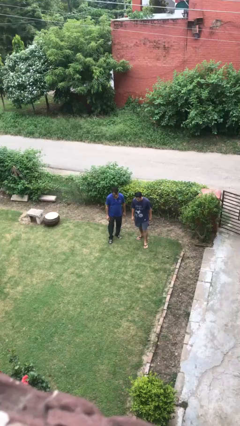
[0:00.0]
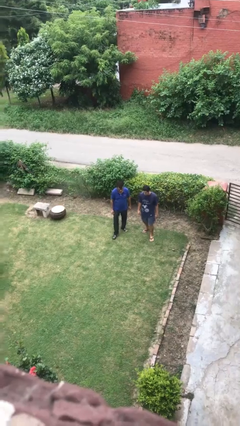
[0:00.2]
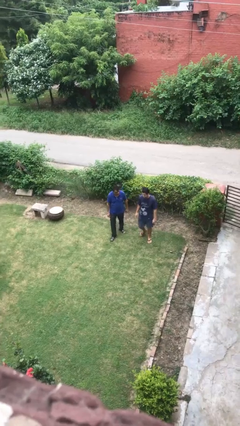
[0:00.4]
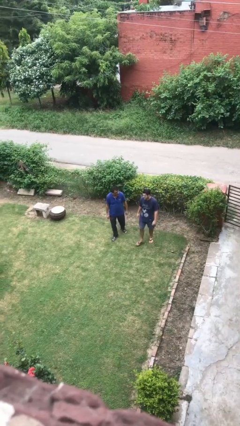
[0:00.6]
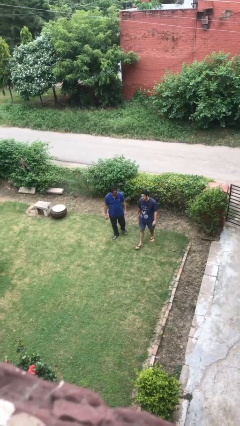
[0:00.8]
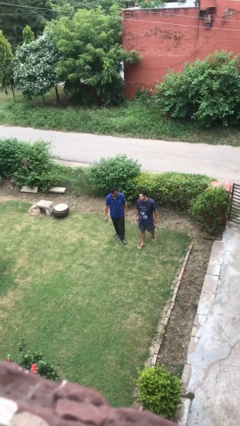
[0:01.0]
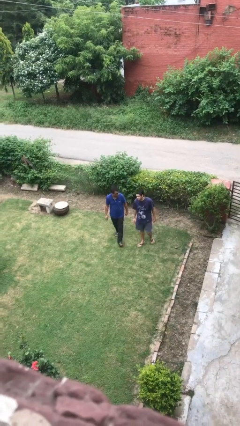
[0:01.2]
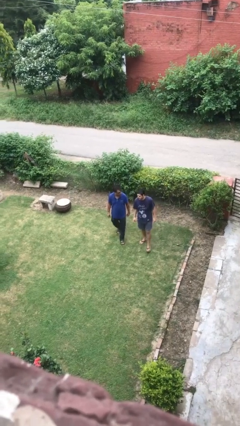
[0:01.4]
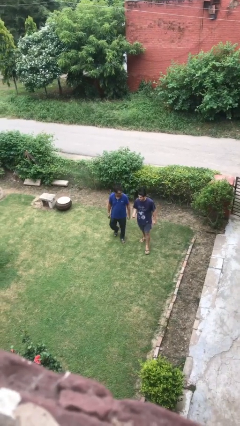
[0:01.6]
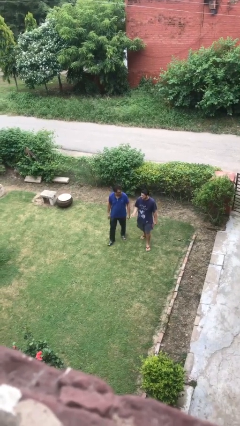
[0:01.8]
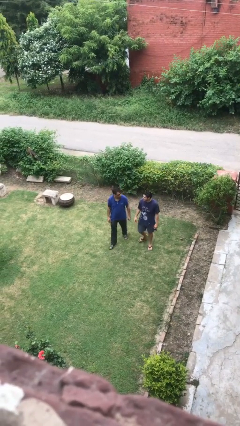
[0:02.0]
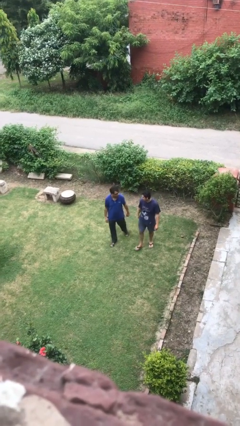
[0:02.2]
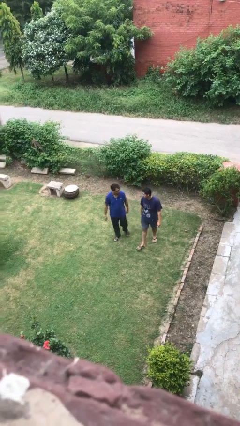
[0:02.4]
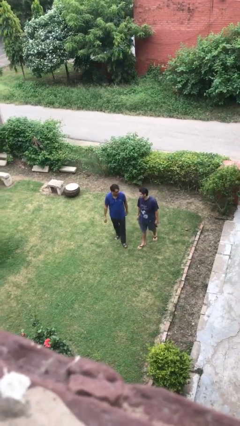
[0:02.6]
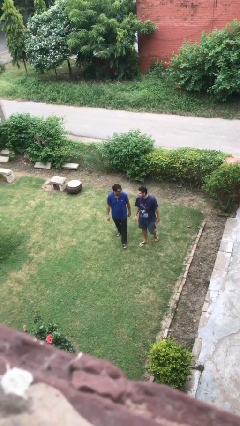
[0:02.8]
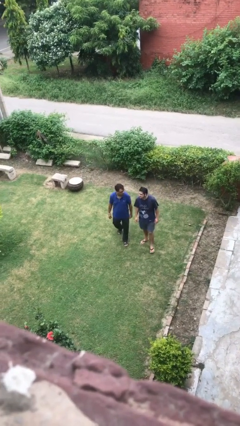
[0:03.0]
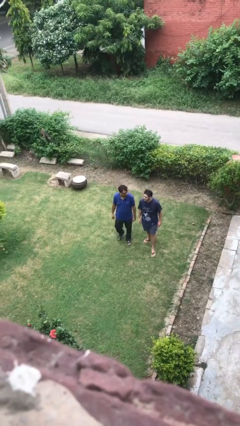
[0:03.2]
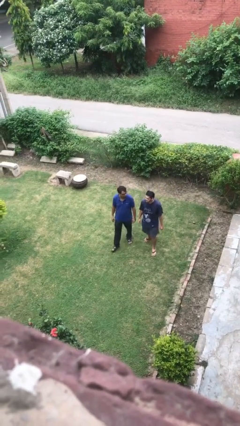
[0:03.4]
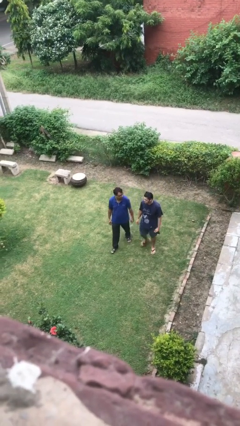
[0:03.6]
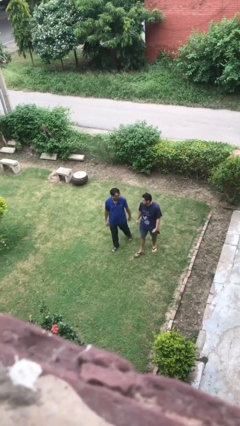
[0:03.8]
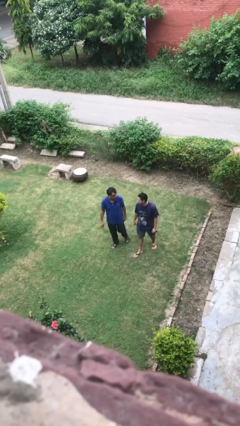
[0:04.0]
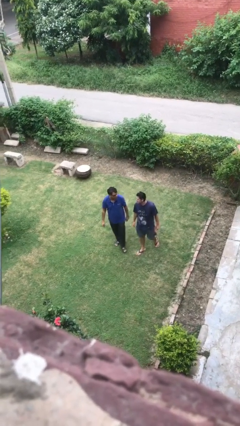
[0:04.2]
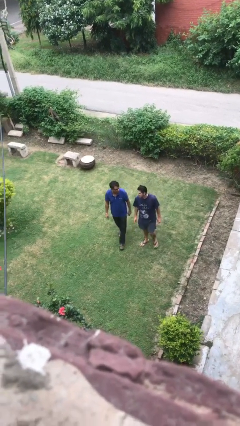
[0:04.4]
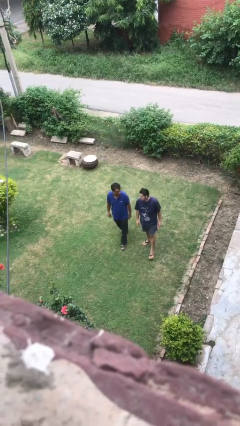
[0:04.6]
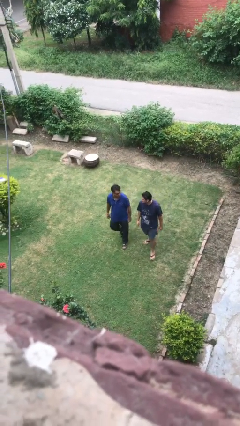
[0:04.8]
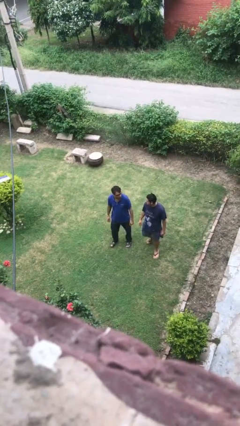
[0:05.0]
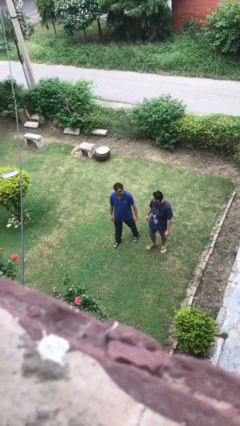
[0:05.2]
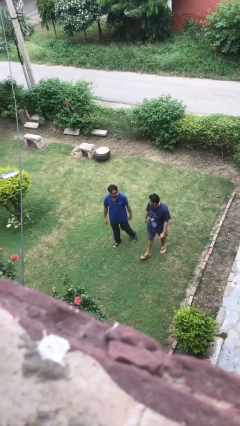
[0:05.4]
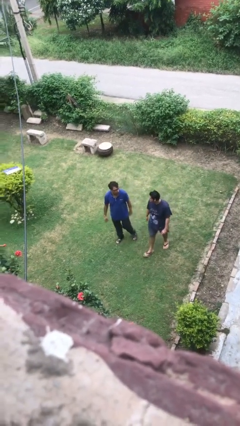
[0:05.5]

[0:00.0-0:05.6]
person talks to person

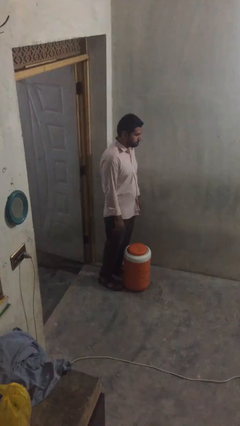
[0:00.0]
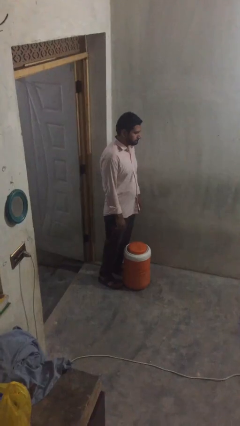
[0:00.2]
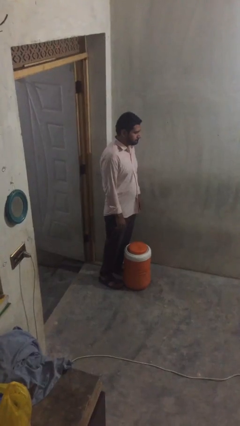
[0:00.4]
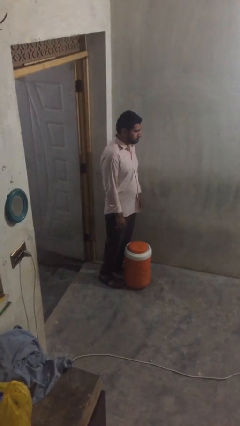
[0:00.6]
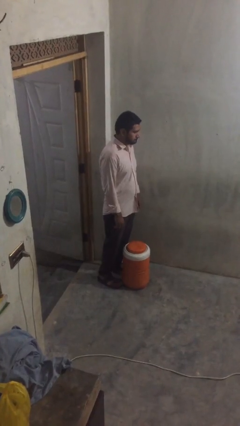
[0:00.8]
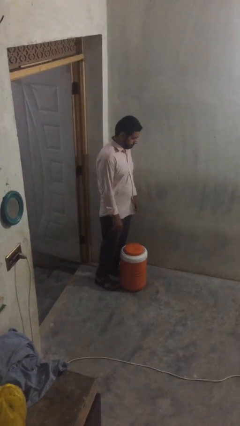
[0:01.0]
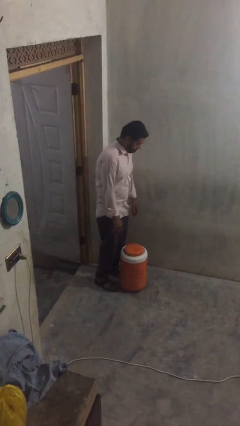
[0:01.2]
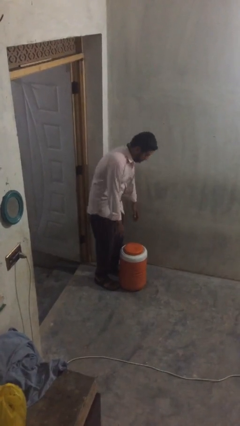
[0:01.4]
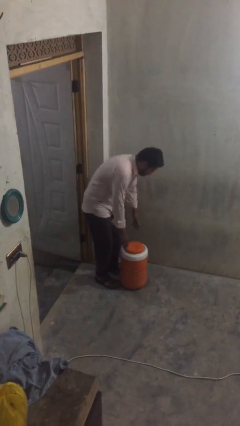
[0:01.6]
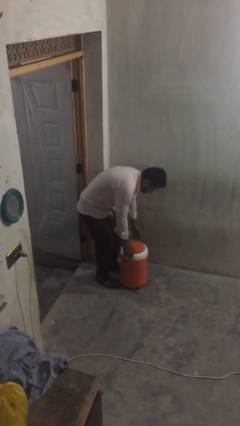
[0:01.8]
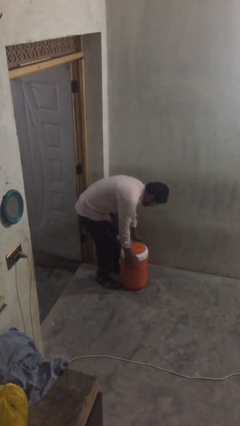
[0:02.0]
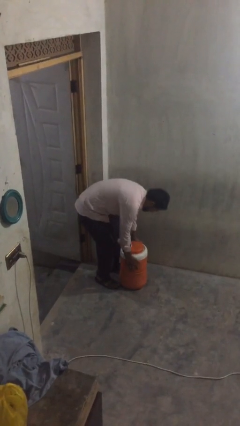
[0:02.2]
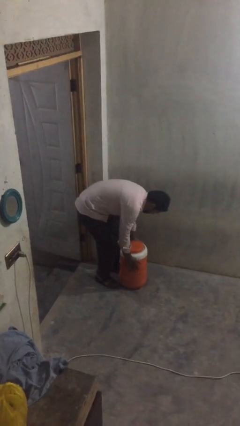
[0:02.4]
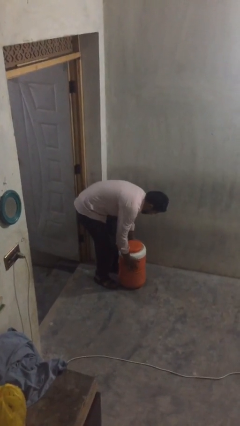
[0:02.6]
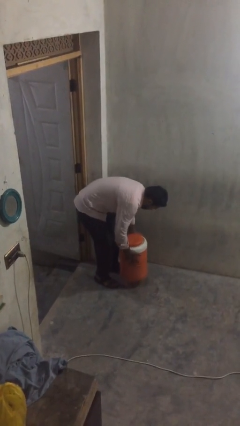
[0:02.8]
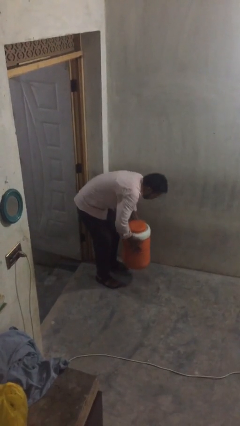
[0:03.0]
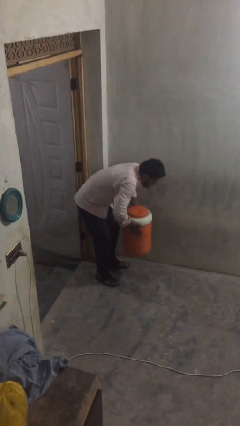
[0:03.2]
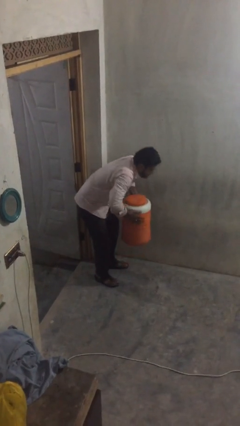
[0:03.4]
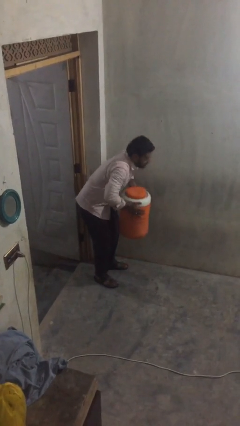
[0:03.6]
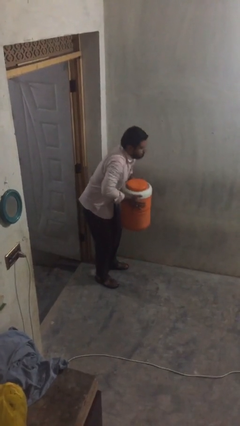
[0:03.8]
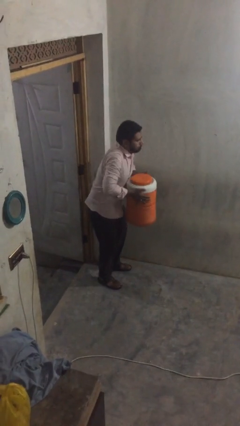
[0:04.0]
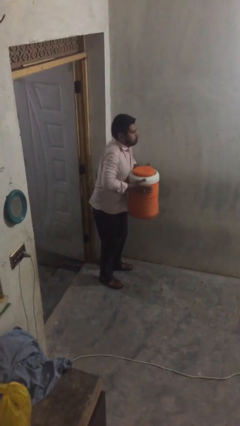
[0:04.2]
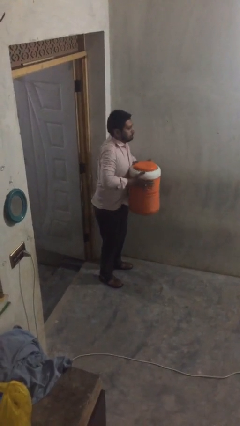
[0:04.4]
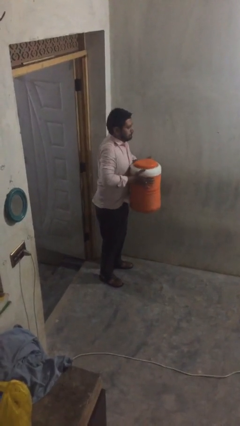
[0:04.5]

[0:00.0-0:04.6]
person picks up object from floor

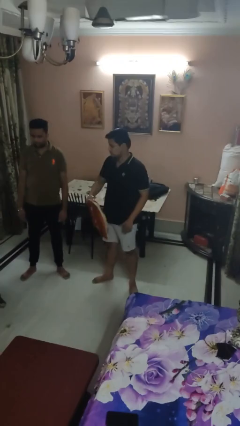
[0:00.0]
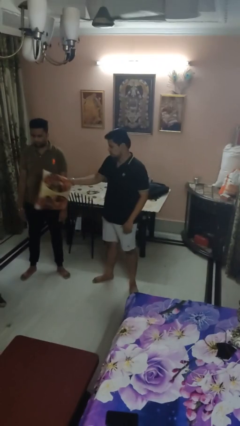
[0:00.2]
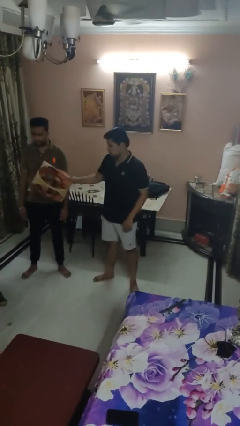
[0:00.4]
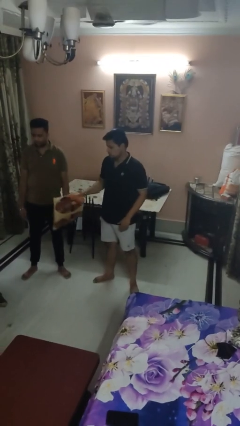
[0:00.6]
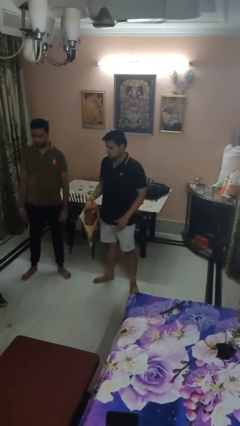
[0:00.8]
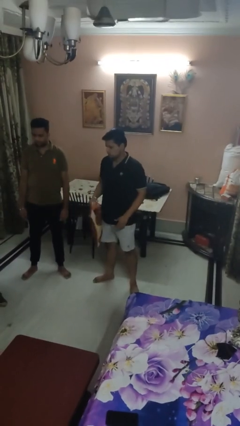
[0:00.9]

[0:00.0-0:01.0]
person hits person with pillow

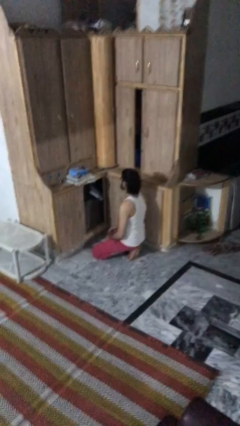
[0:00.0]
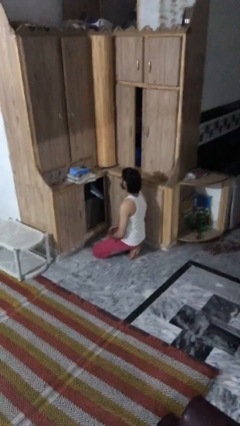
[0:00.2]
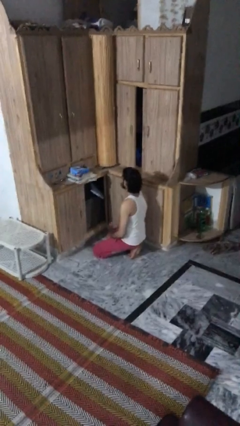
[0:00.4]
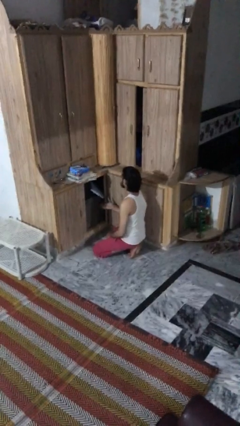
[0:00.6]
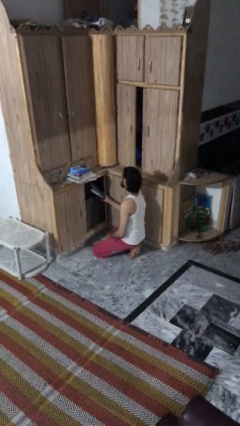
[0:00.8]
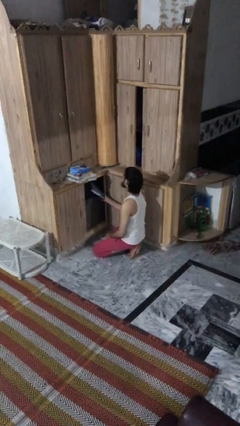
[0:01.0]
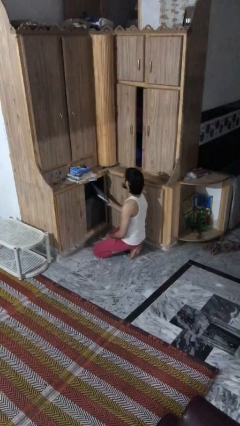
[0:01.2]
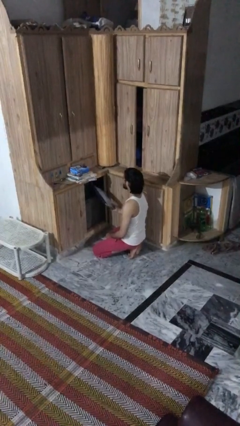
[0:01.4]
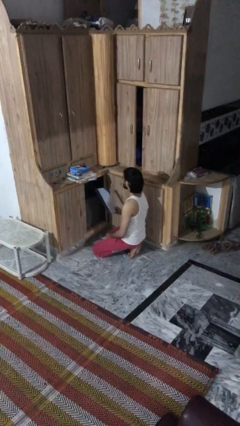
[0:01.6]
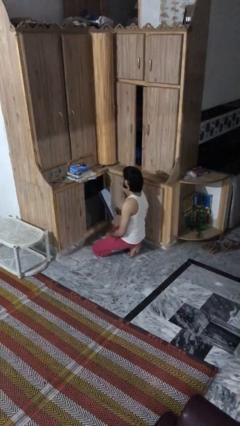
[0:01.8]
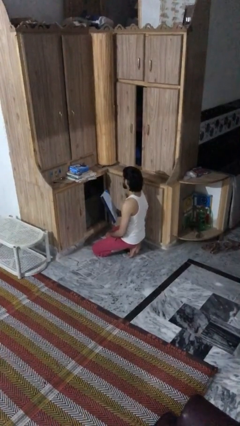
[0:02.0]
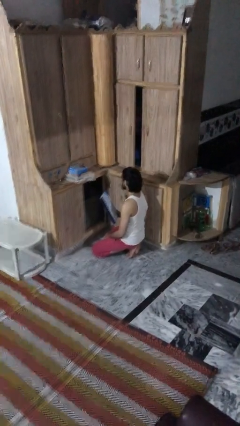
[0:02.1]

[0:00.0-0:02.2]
person picks up object from cabinet

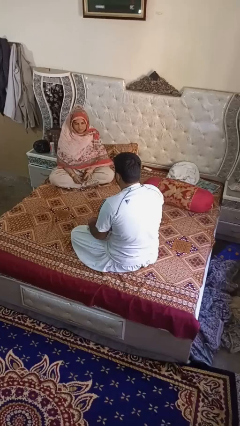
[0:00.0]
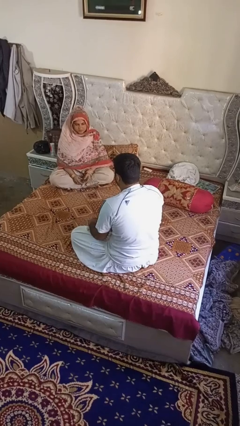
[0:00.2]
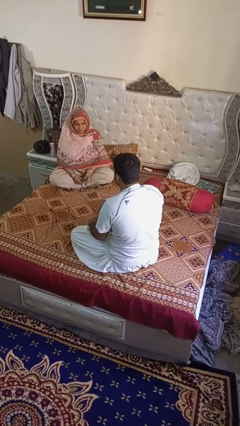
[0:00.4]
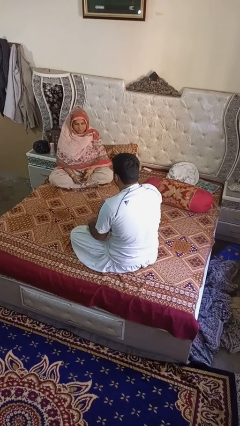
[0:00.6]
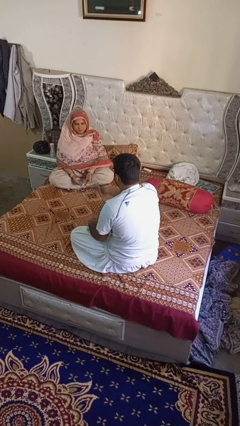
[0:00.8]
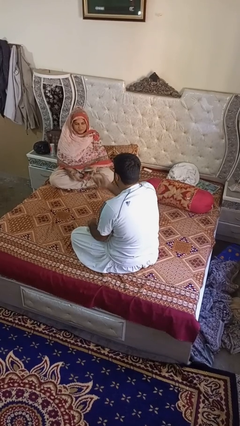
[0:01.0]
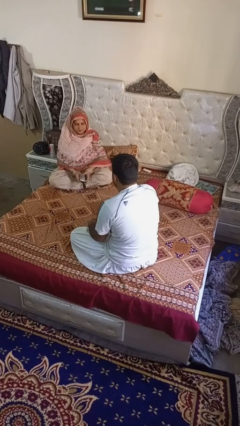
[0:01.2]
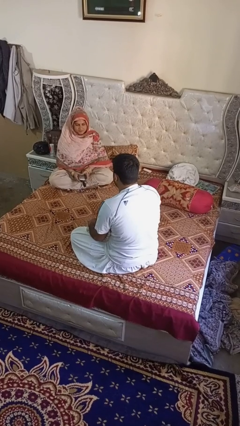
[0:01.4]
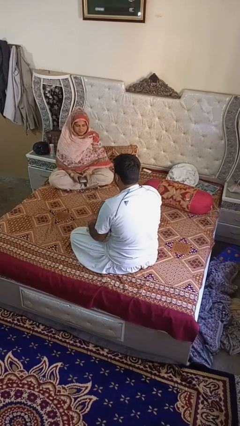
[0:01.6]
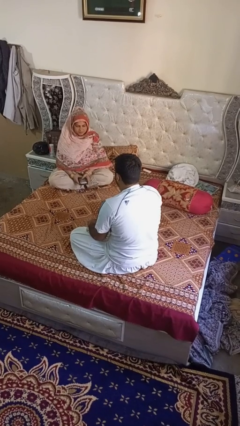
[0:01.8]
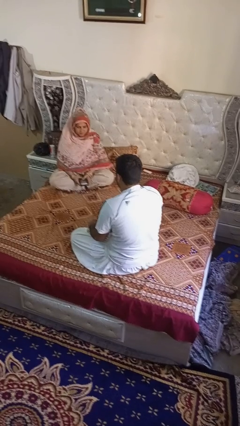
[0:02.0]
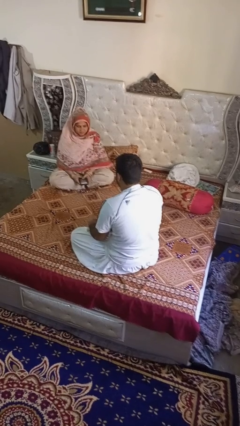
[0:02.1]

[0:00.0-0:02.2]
person throws object to person

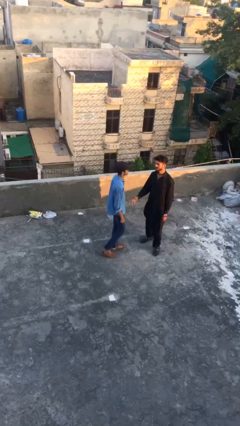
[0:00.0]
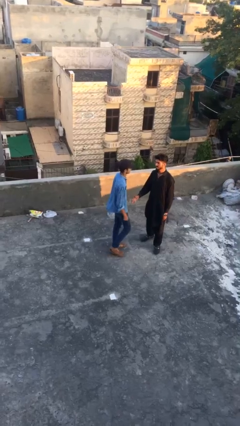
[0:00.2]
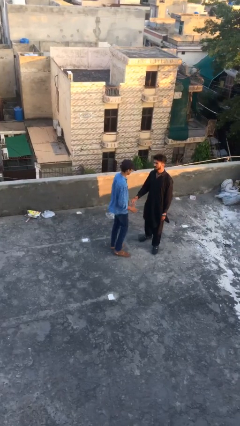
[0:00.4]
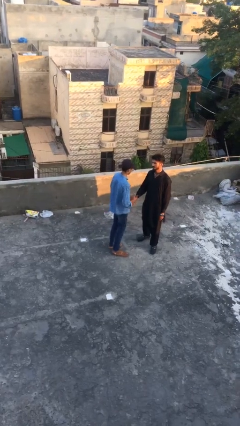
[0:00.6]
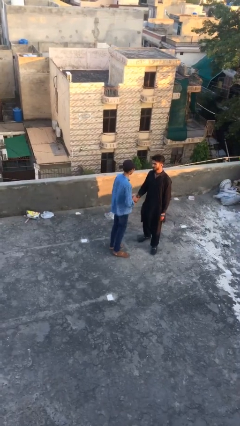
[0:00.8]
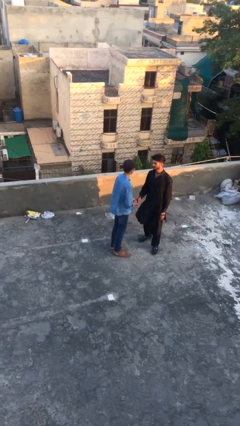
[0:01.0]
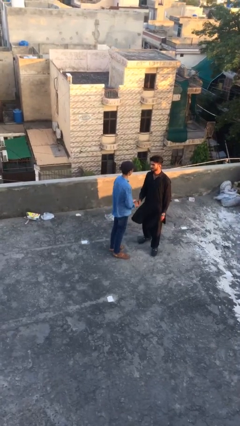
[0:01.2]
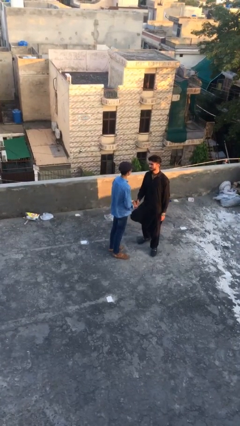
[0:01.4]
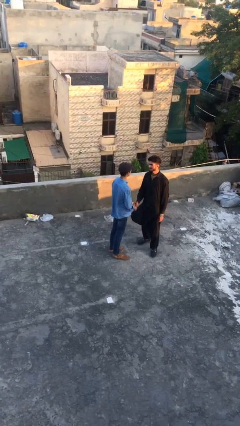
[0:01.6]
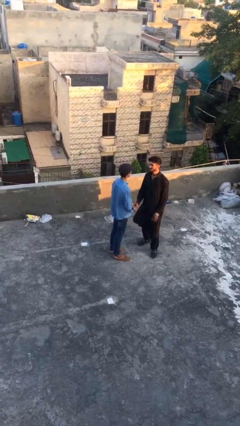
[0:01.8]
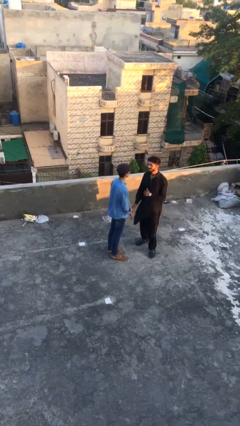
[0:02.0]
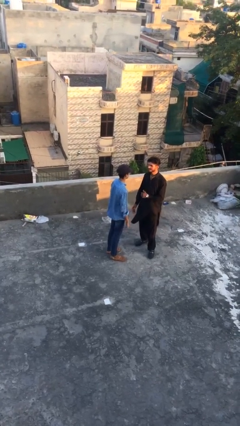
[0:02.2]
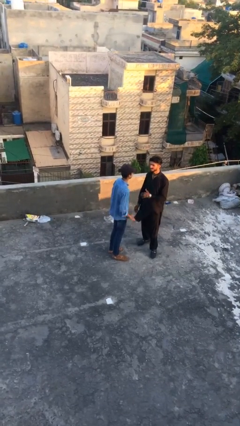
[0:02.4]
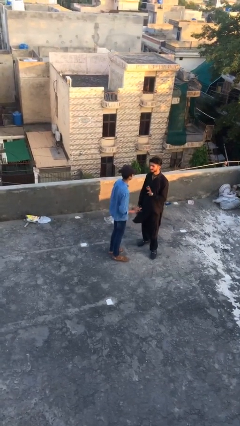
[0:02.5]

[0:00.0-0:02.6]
person shakes hand
